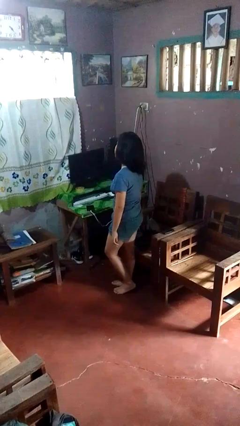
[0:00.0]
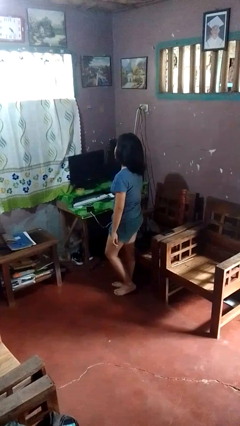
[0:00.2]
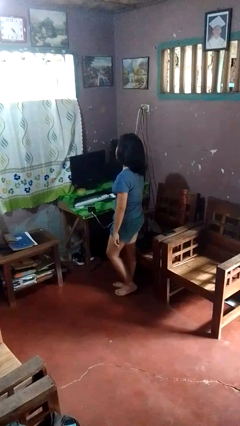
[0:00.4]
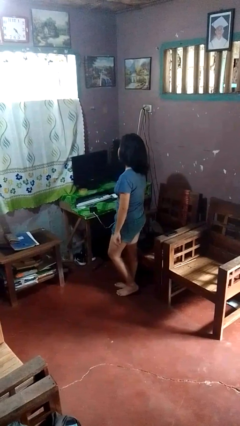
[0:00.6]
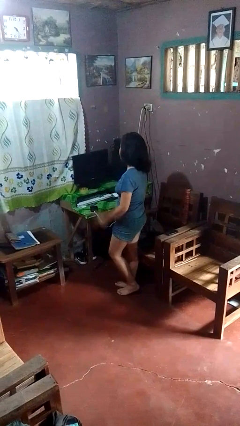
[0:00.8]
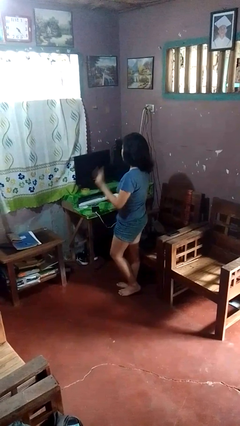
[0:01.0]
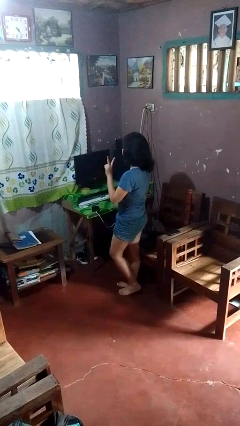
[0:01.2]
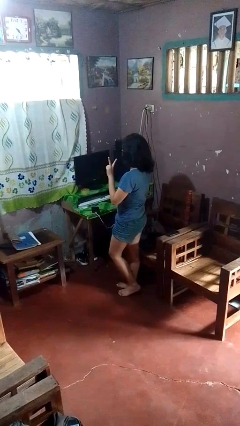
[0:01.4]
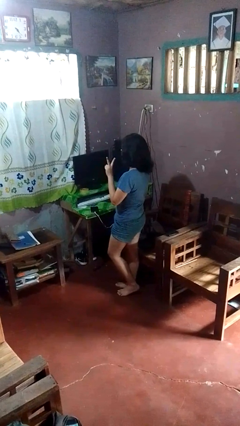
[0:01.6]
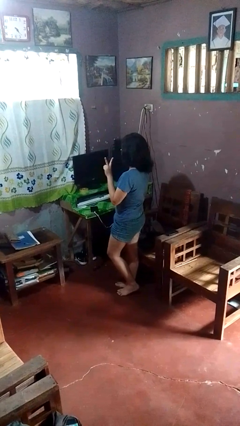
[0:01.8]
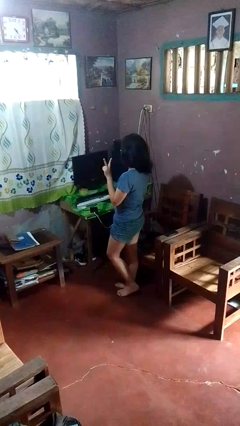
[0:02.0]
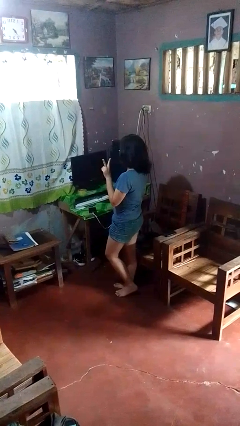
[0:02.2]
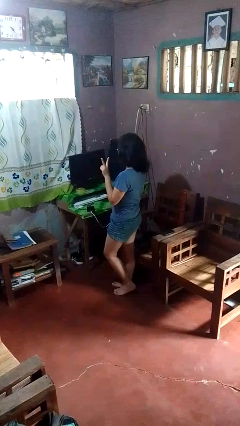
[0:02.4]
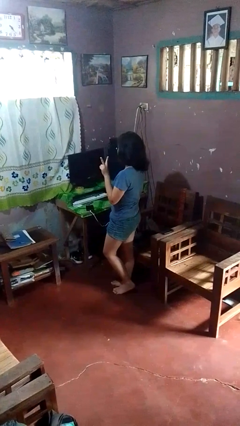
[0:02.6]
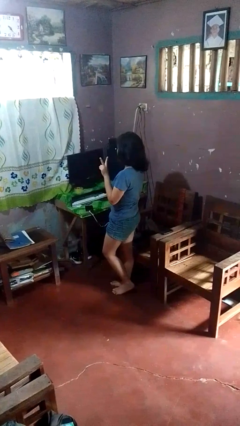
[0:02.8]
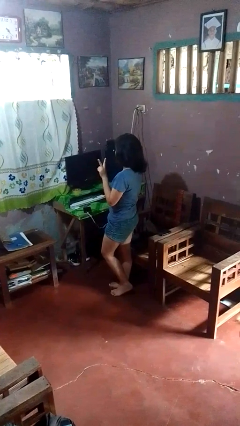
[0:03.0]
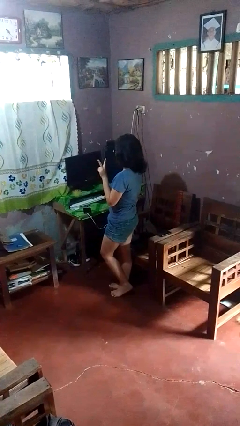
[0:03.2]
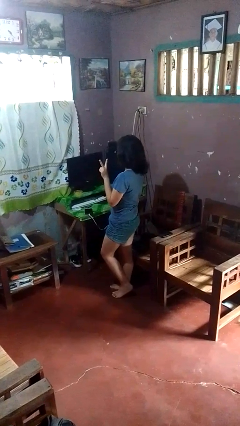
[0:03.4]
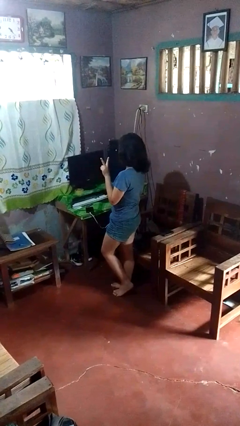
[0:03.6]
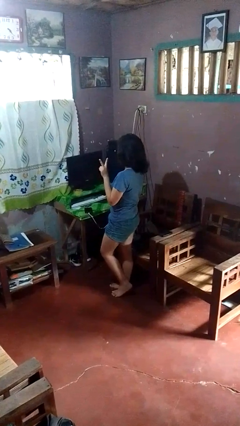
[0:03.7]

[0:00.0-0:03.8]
person gestures peace

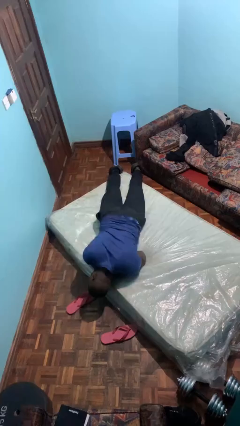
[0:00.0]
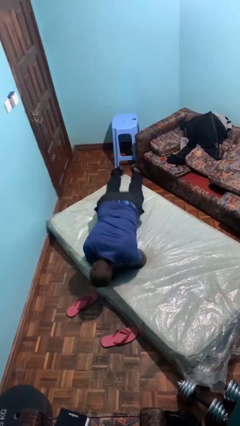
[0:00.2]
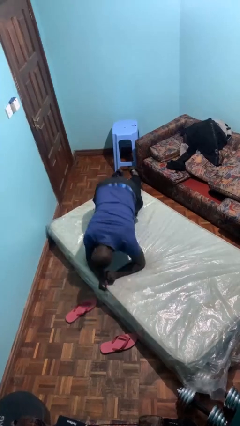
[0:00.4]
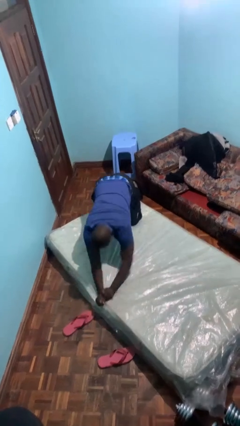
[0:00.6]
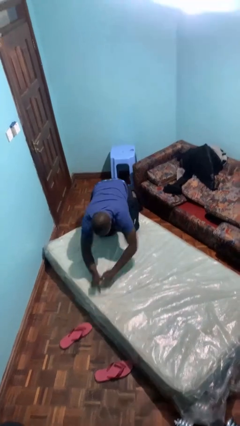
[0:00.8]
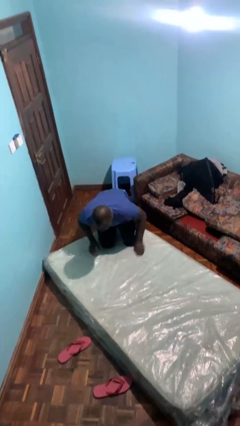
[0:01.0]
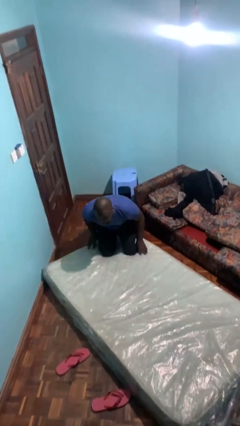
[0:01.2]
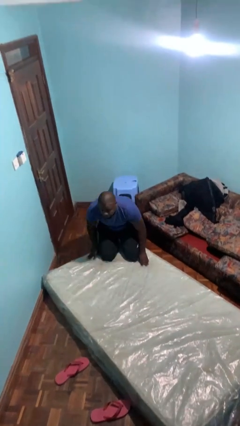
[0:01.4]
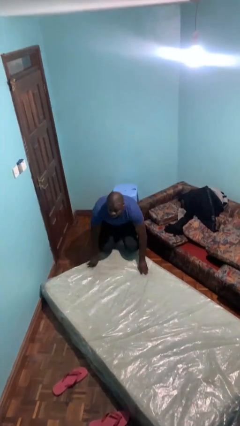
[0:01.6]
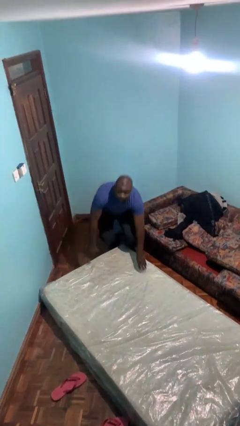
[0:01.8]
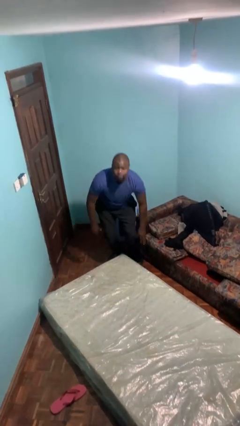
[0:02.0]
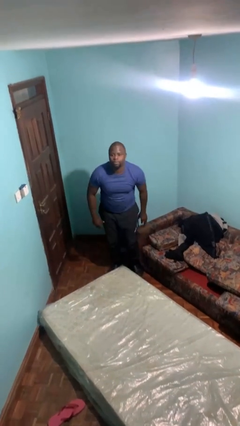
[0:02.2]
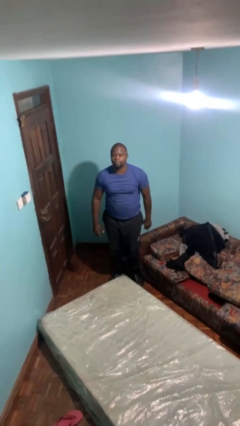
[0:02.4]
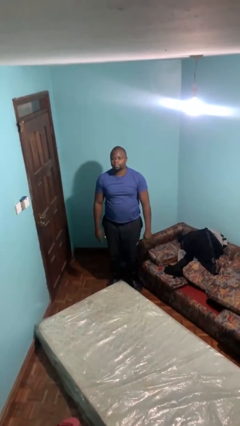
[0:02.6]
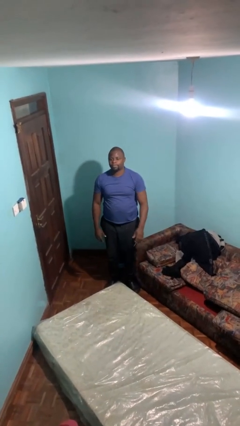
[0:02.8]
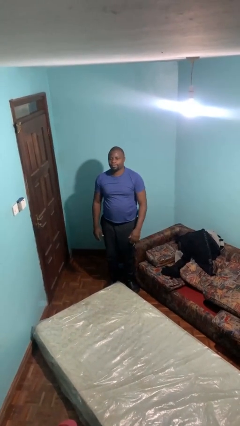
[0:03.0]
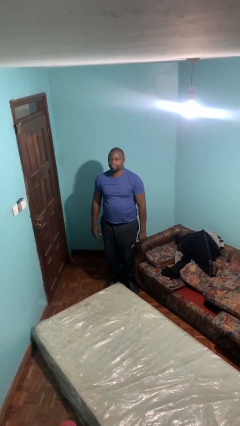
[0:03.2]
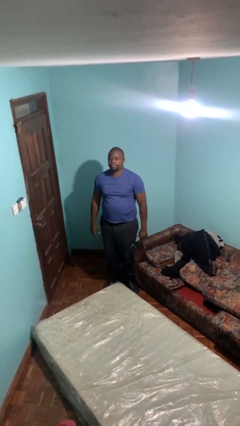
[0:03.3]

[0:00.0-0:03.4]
person stands up

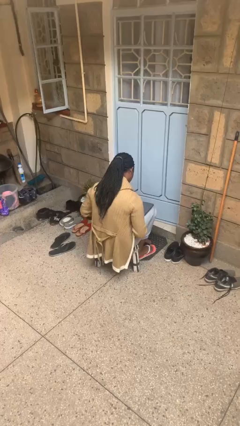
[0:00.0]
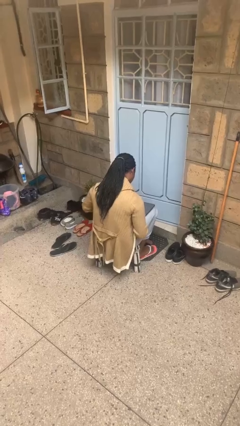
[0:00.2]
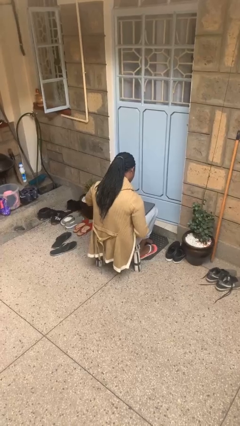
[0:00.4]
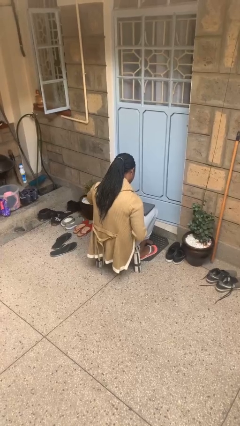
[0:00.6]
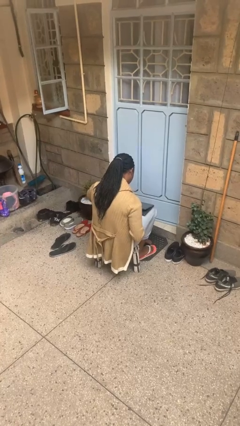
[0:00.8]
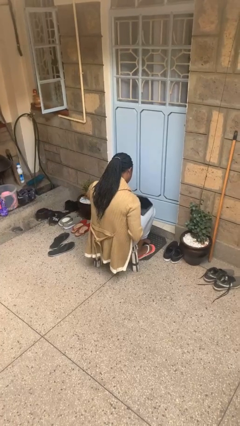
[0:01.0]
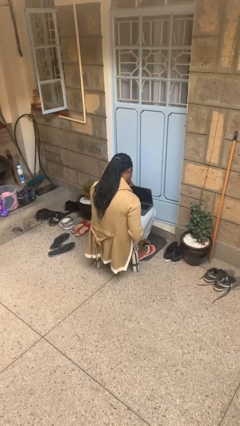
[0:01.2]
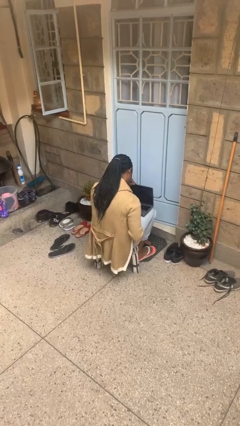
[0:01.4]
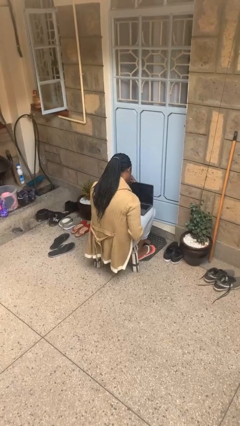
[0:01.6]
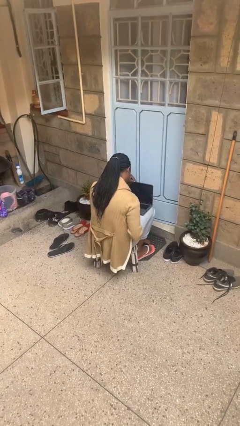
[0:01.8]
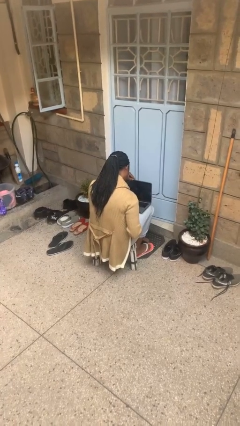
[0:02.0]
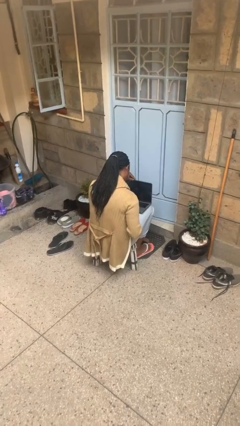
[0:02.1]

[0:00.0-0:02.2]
person opens laptop

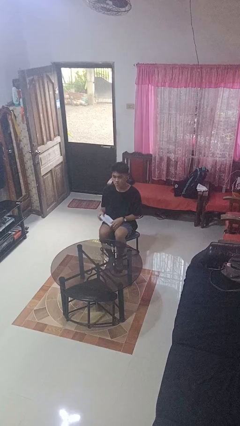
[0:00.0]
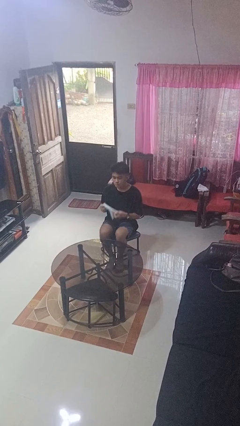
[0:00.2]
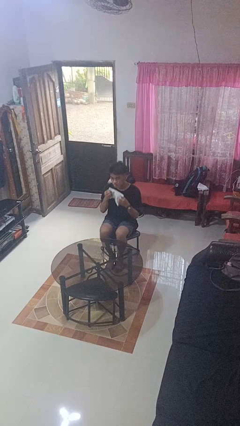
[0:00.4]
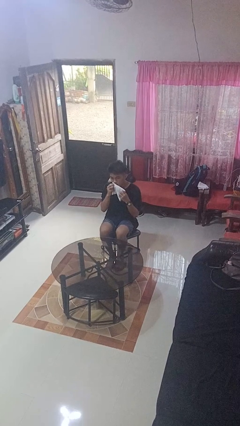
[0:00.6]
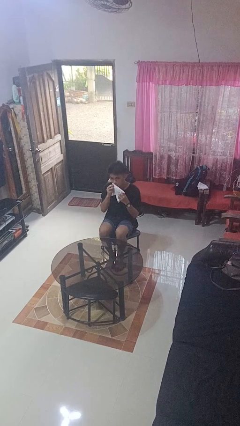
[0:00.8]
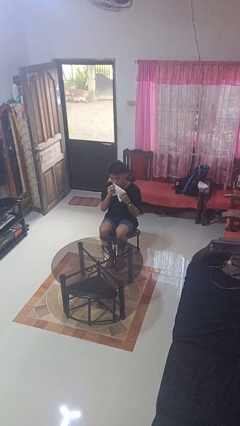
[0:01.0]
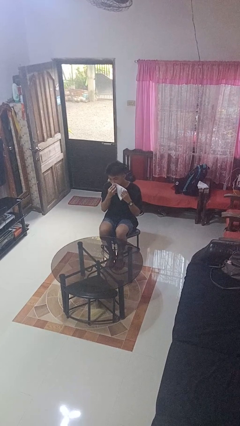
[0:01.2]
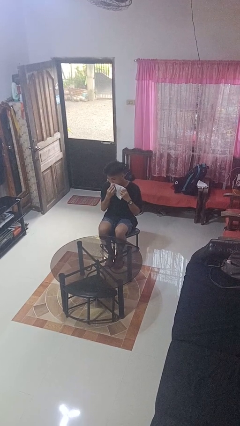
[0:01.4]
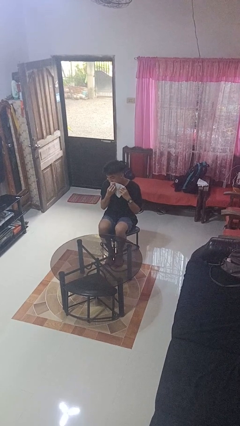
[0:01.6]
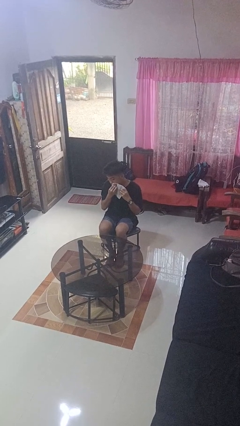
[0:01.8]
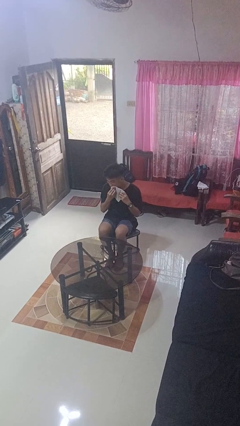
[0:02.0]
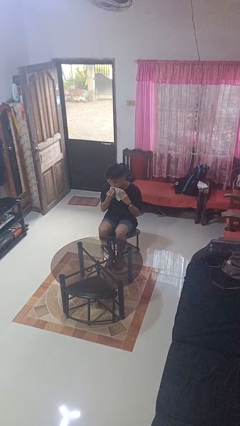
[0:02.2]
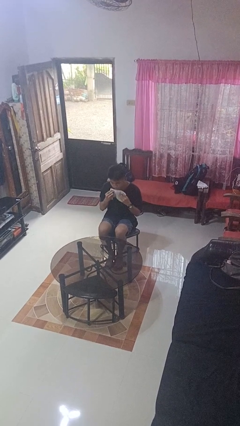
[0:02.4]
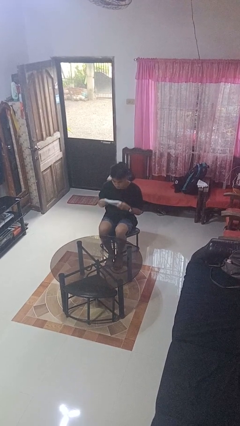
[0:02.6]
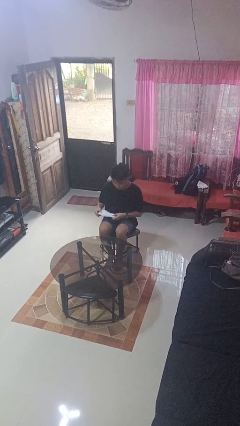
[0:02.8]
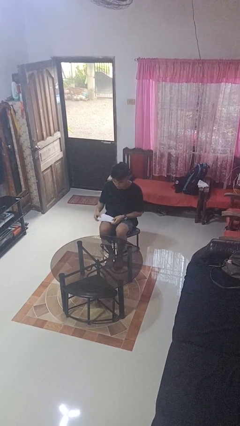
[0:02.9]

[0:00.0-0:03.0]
person wipes mouth with napkin

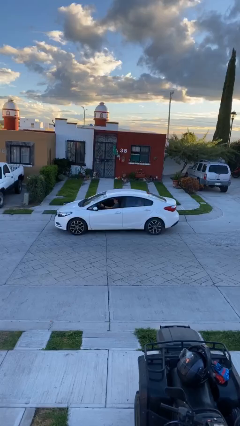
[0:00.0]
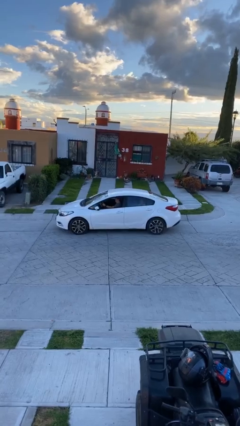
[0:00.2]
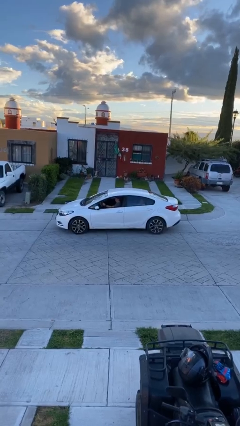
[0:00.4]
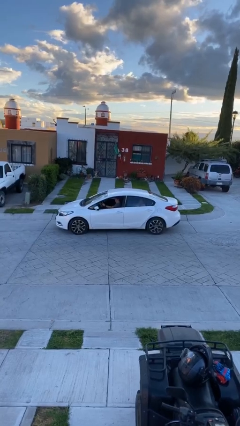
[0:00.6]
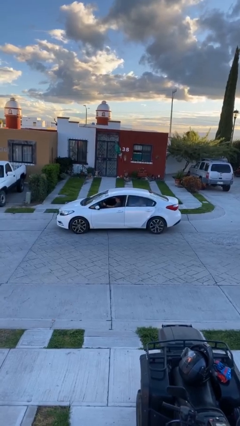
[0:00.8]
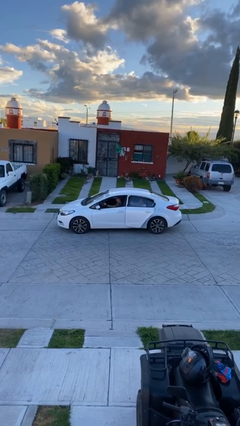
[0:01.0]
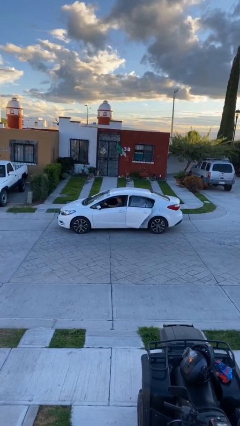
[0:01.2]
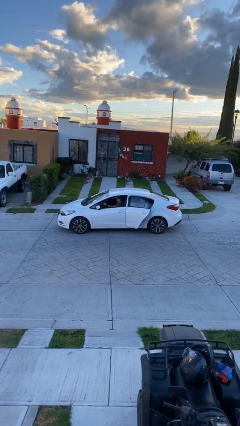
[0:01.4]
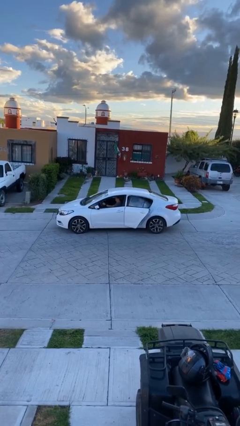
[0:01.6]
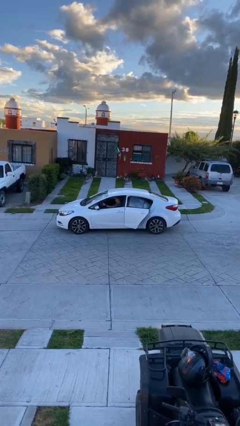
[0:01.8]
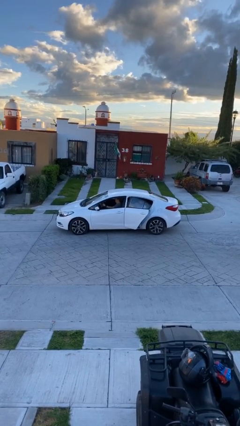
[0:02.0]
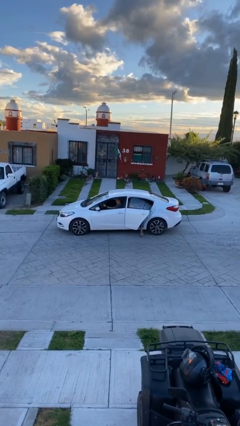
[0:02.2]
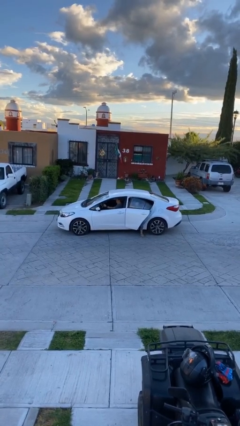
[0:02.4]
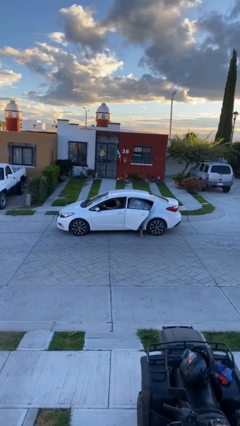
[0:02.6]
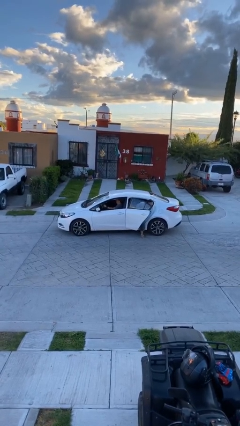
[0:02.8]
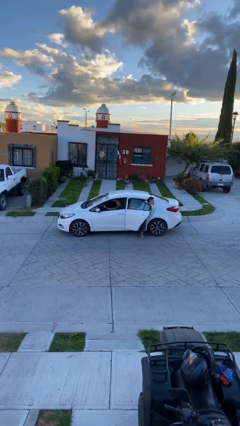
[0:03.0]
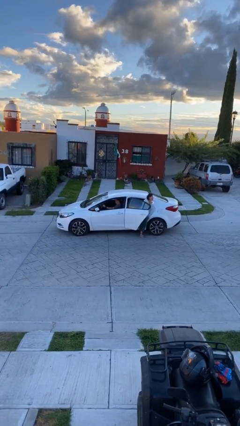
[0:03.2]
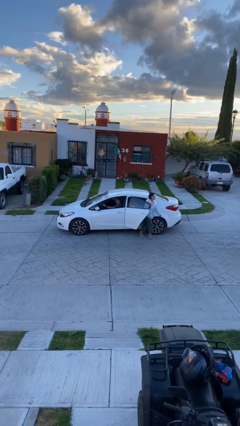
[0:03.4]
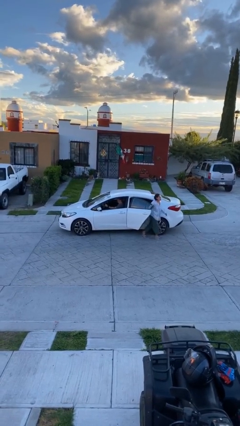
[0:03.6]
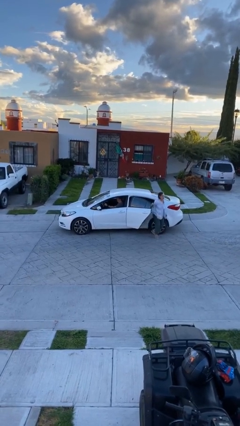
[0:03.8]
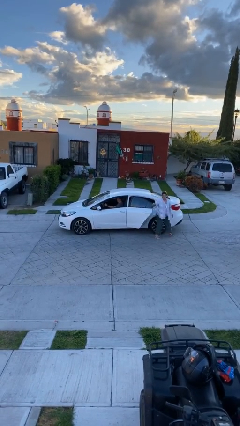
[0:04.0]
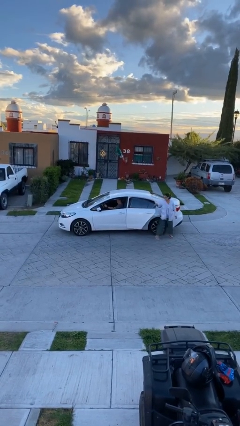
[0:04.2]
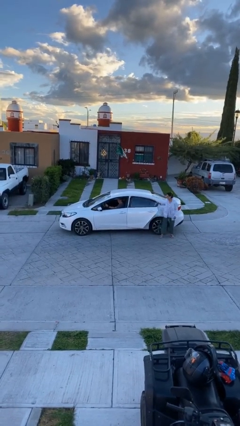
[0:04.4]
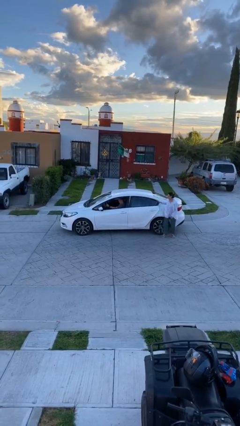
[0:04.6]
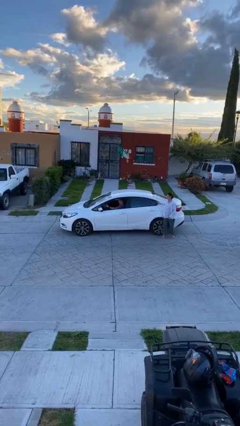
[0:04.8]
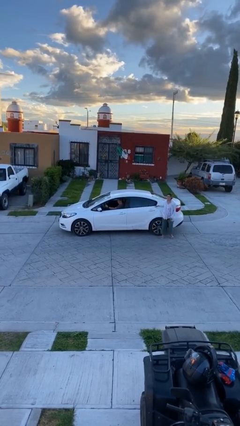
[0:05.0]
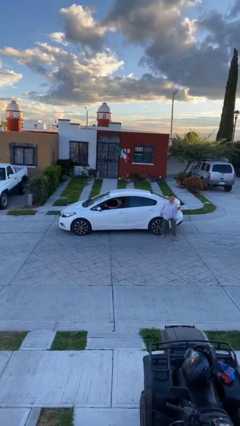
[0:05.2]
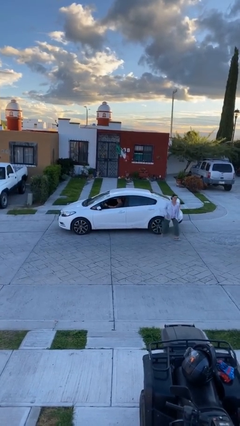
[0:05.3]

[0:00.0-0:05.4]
car drops off person
